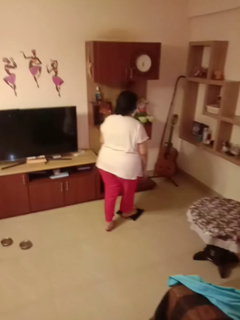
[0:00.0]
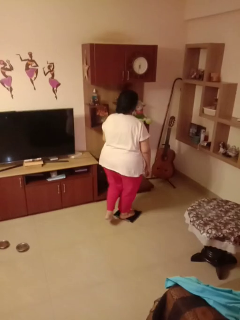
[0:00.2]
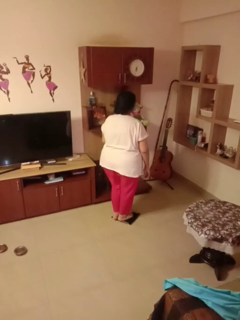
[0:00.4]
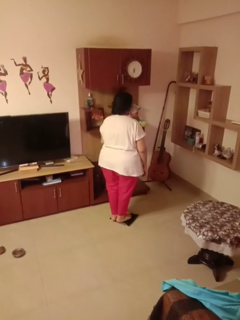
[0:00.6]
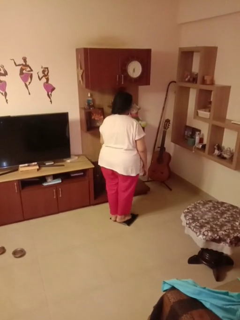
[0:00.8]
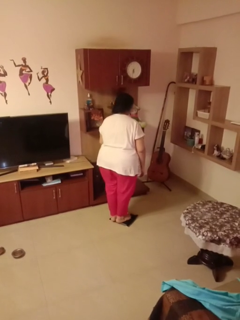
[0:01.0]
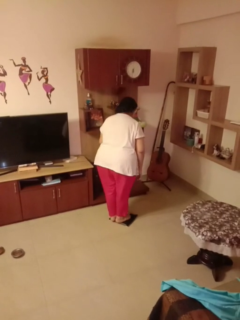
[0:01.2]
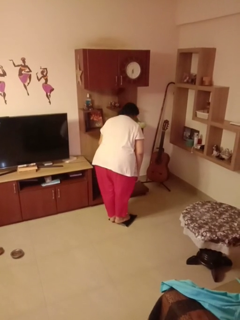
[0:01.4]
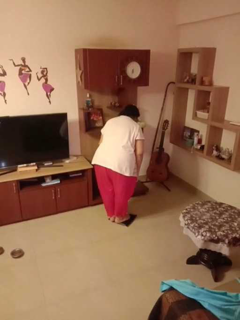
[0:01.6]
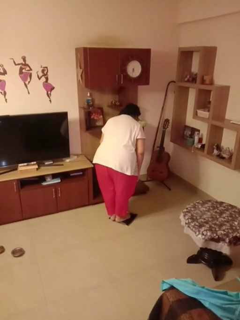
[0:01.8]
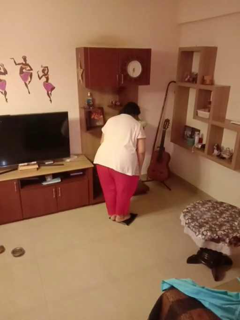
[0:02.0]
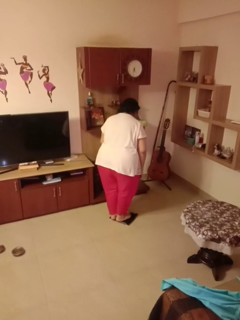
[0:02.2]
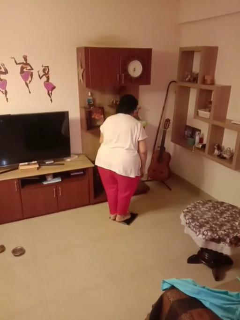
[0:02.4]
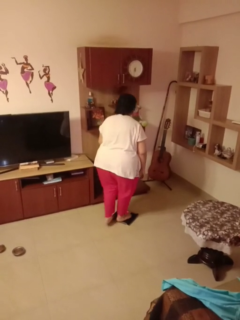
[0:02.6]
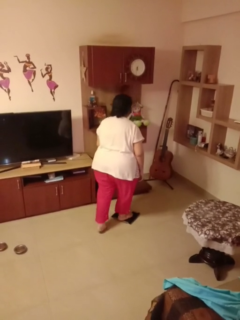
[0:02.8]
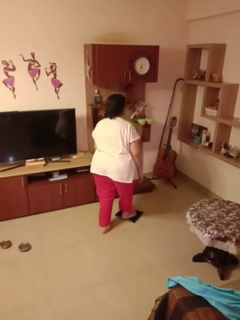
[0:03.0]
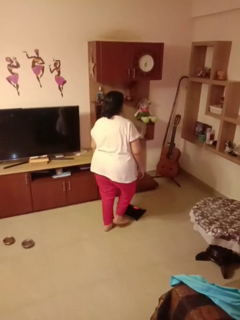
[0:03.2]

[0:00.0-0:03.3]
person uses bodyweight scale

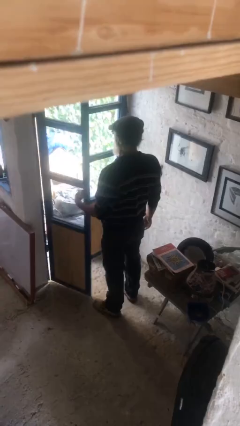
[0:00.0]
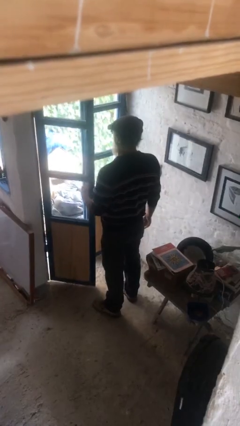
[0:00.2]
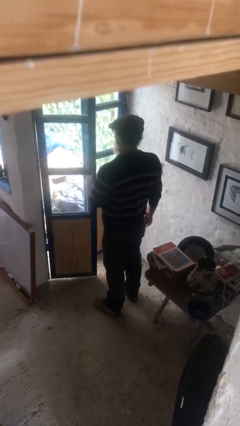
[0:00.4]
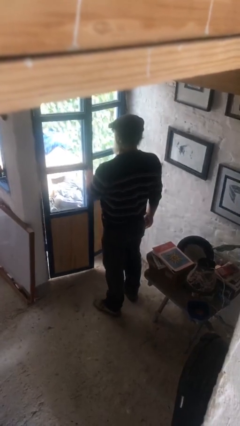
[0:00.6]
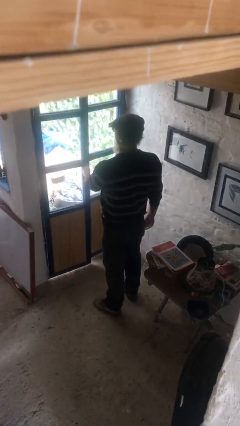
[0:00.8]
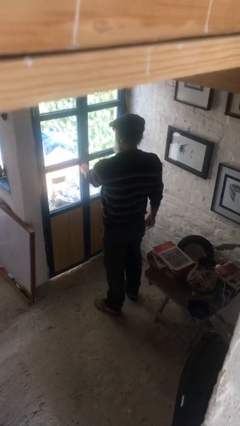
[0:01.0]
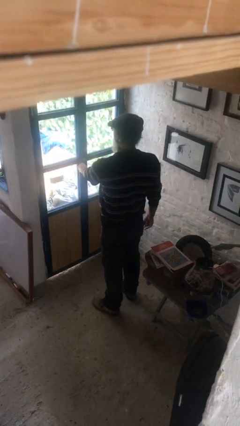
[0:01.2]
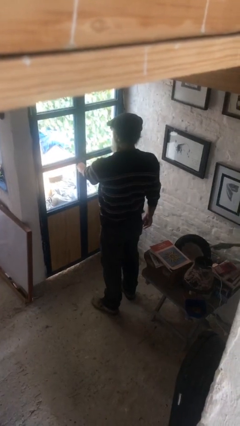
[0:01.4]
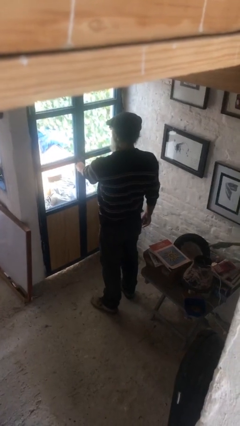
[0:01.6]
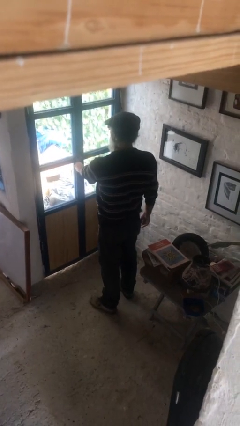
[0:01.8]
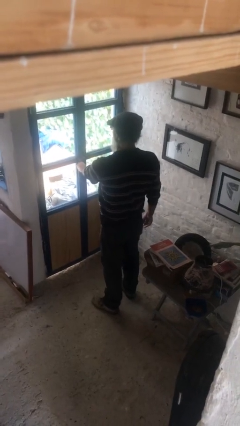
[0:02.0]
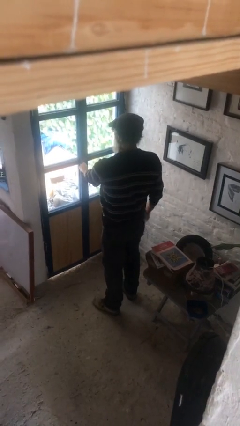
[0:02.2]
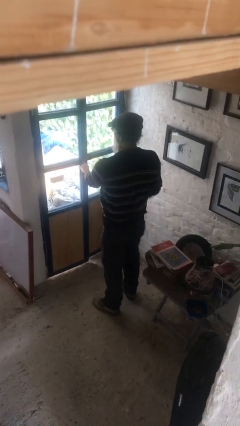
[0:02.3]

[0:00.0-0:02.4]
person closes facility door

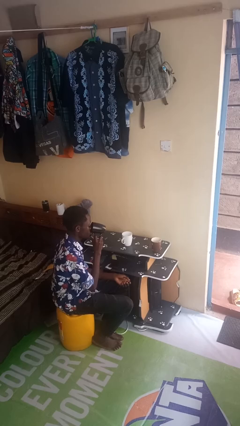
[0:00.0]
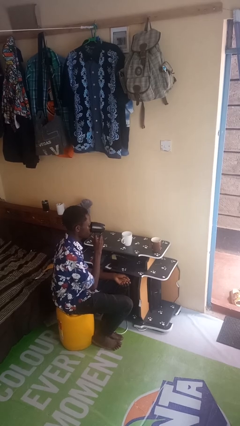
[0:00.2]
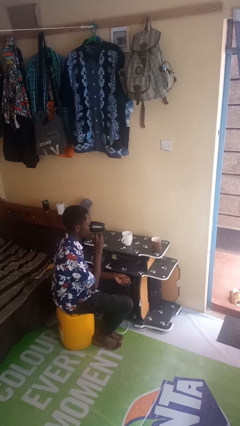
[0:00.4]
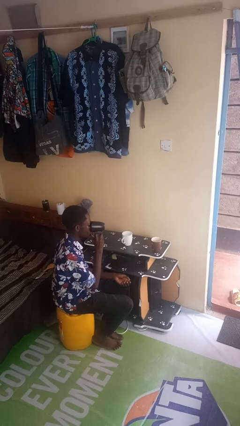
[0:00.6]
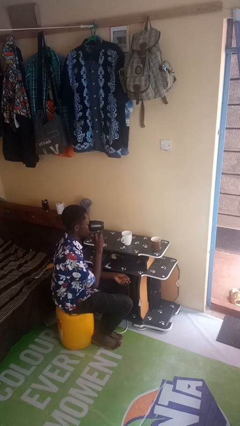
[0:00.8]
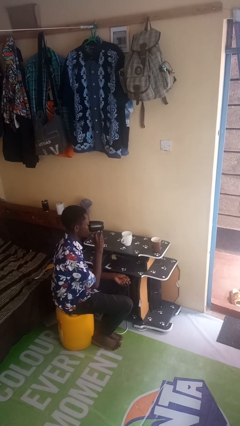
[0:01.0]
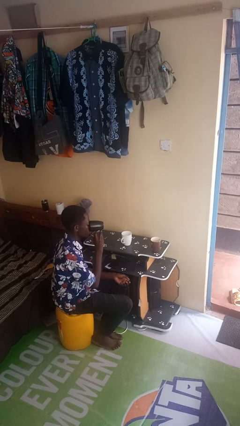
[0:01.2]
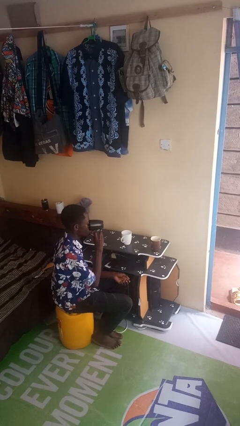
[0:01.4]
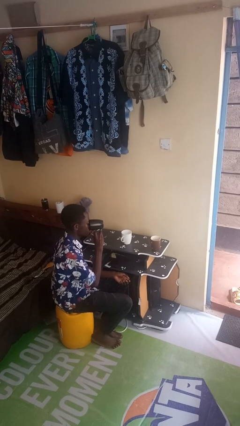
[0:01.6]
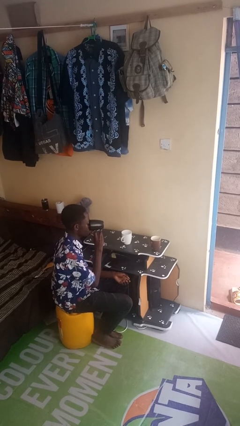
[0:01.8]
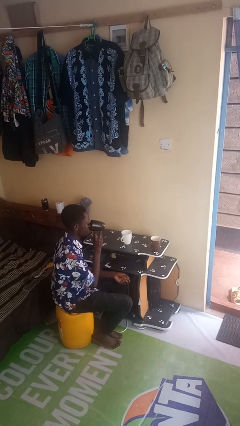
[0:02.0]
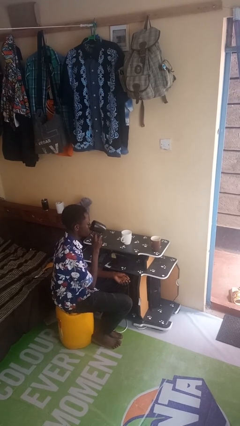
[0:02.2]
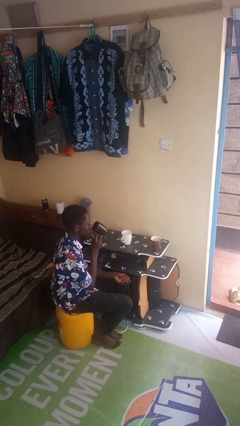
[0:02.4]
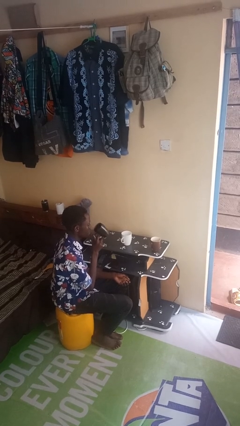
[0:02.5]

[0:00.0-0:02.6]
person drinks from shotglass

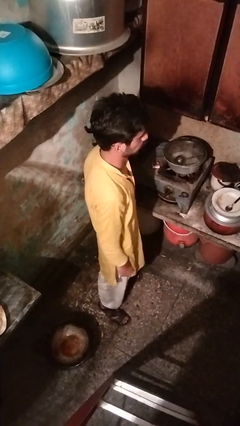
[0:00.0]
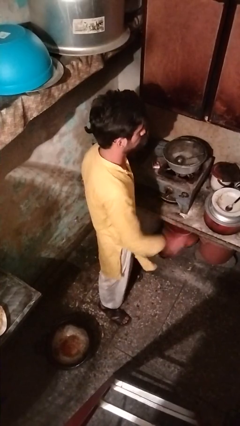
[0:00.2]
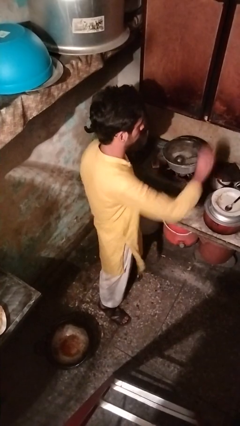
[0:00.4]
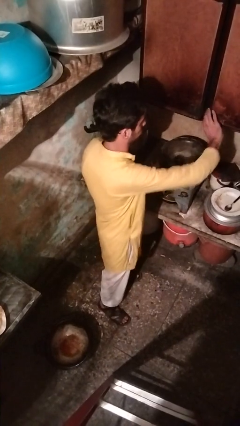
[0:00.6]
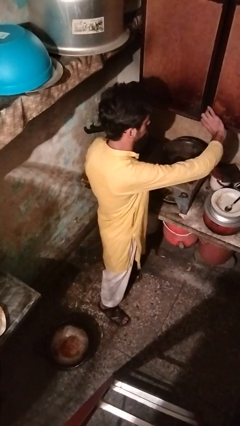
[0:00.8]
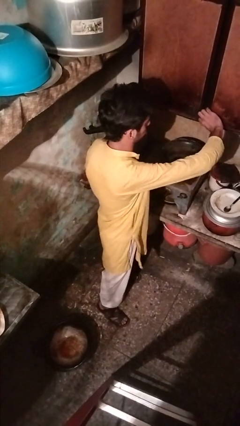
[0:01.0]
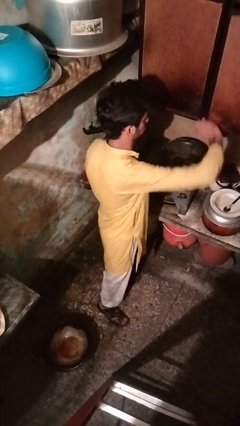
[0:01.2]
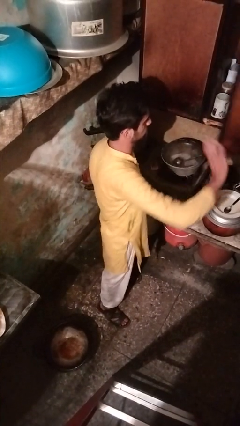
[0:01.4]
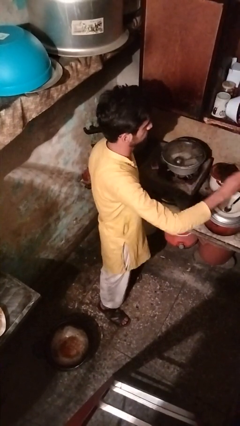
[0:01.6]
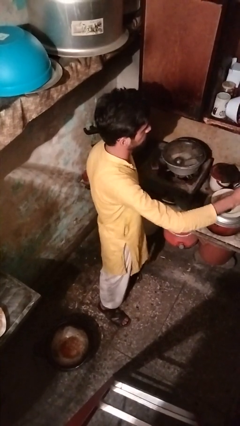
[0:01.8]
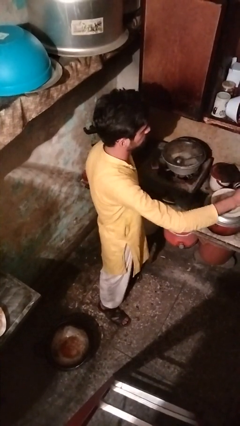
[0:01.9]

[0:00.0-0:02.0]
person opens cabinet

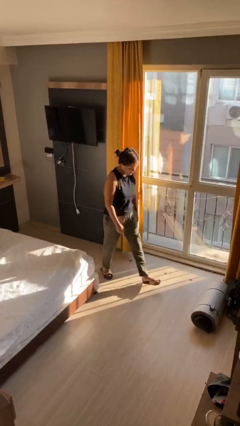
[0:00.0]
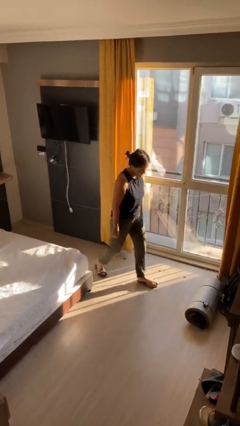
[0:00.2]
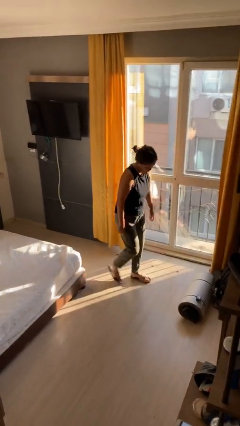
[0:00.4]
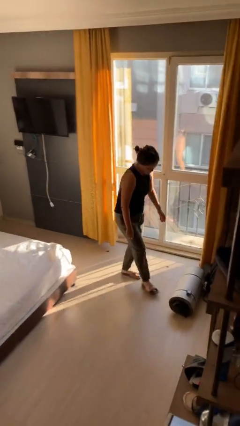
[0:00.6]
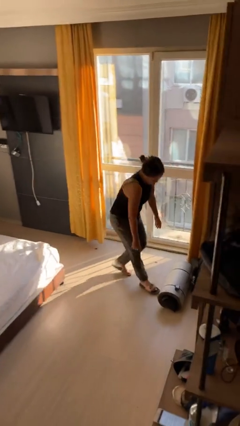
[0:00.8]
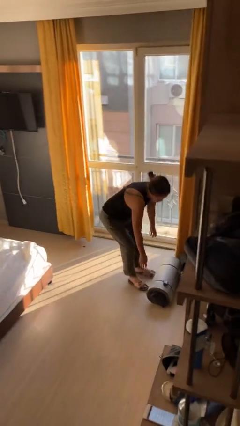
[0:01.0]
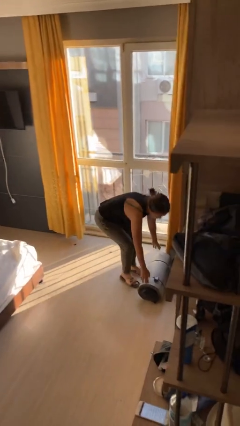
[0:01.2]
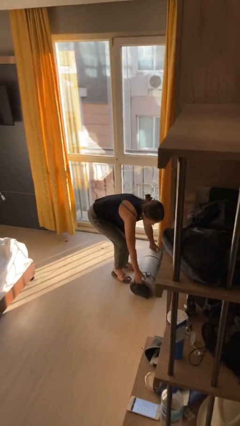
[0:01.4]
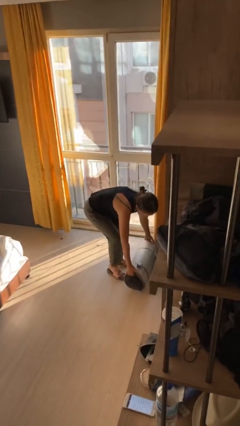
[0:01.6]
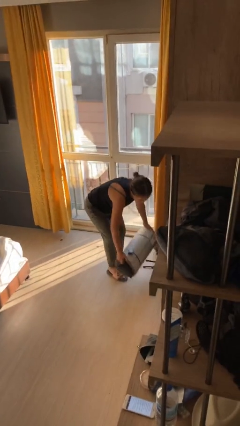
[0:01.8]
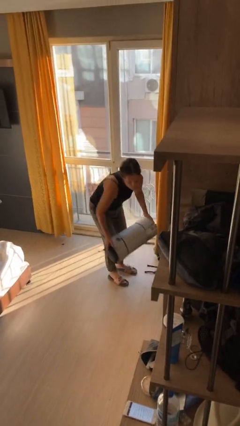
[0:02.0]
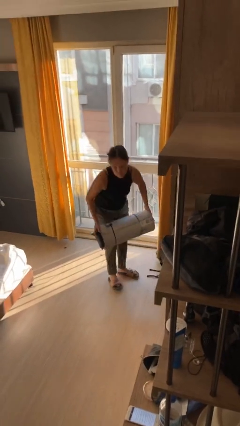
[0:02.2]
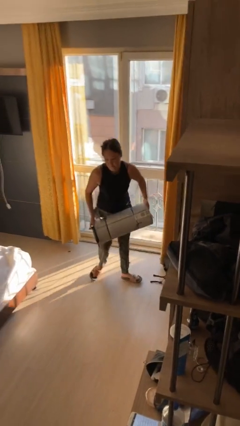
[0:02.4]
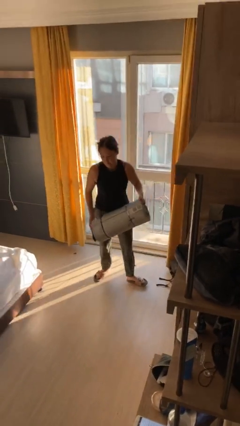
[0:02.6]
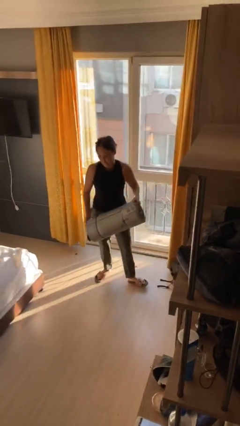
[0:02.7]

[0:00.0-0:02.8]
person picks up object from floor

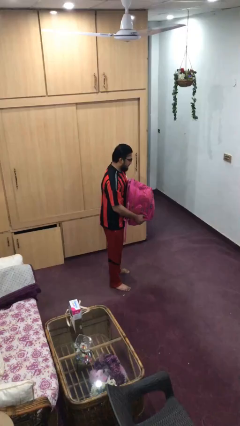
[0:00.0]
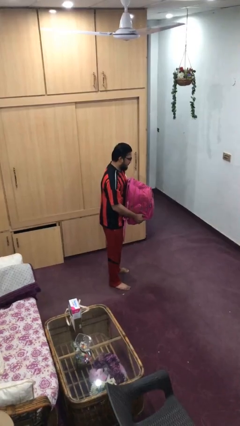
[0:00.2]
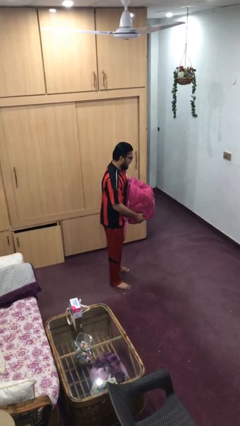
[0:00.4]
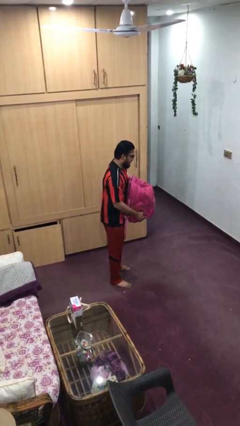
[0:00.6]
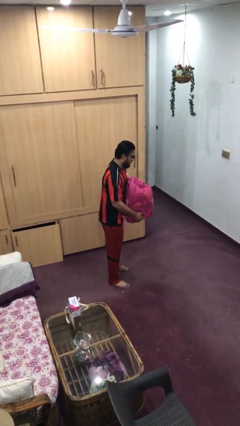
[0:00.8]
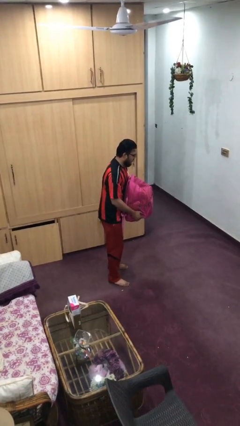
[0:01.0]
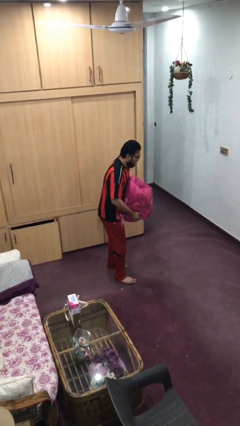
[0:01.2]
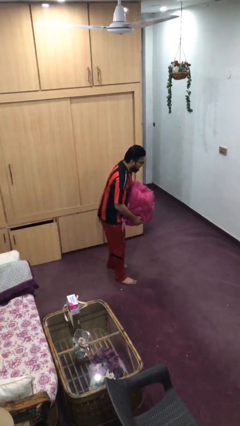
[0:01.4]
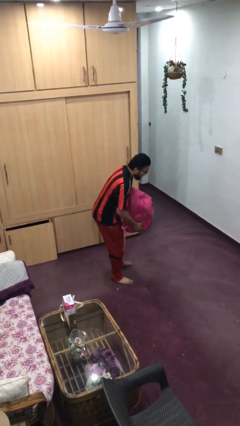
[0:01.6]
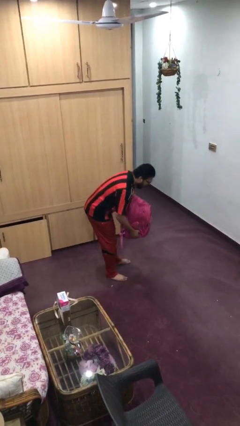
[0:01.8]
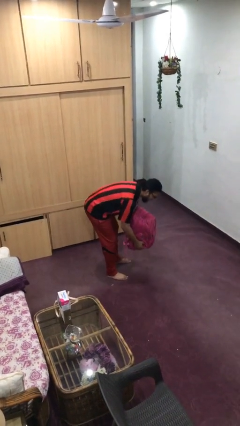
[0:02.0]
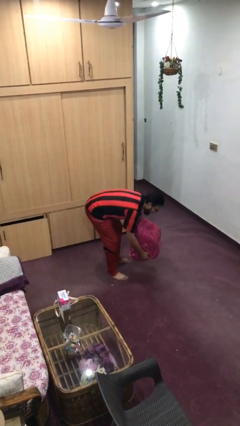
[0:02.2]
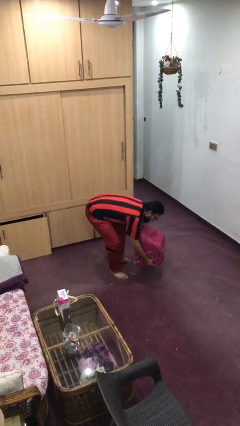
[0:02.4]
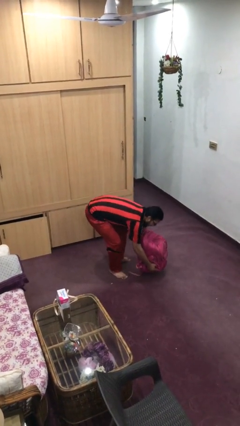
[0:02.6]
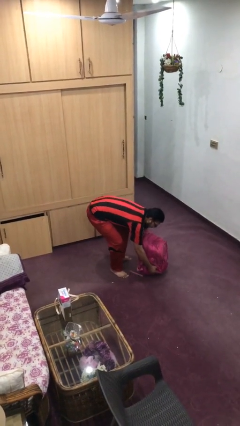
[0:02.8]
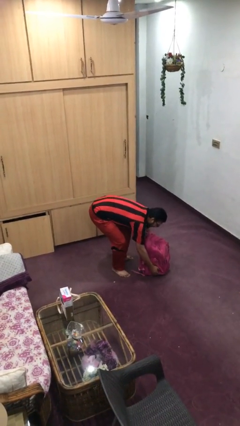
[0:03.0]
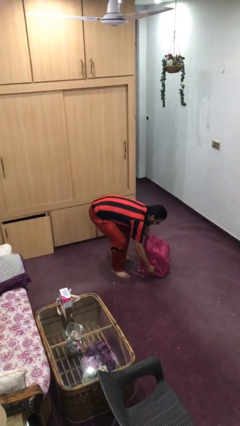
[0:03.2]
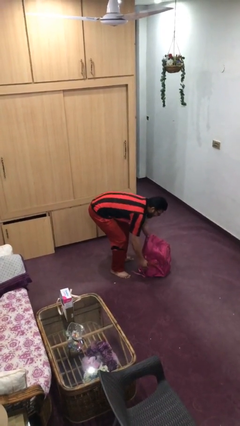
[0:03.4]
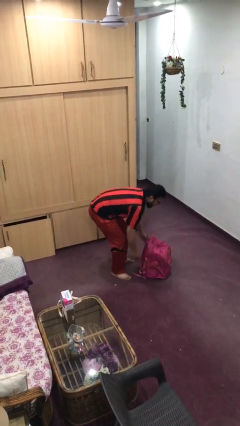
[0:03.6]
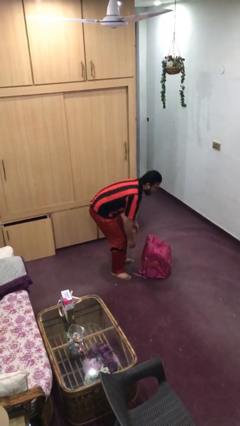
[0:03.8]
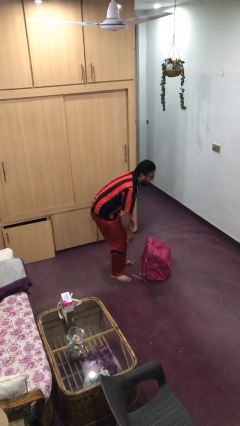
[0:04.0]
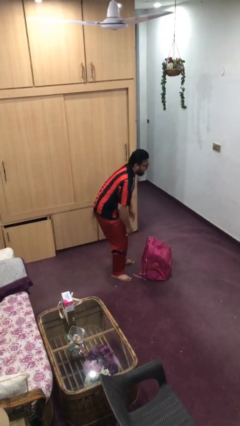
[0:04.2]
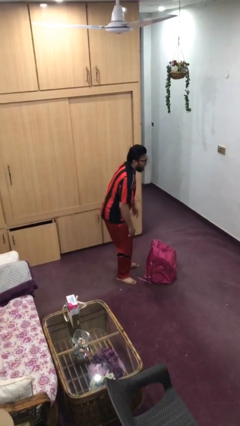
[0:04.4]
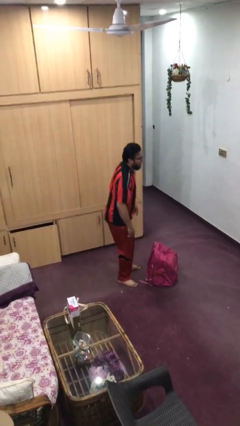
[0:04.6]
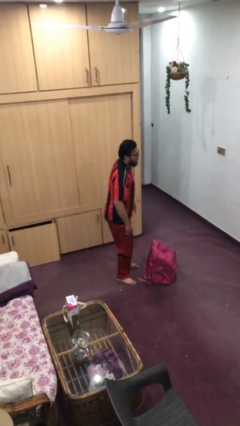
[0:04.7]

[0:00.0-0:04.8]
person puts down object on floor

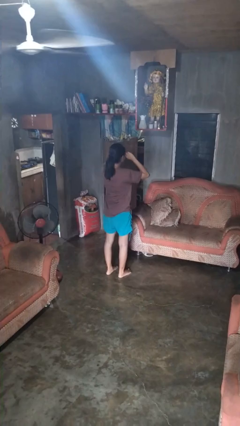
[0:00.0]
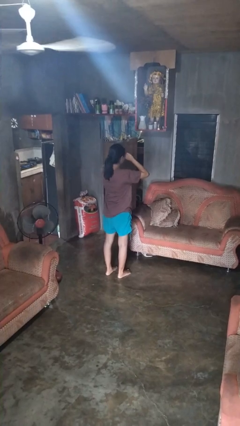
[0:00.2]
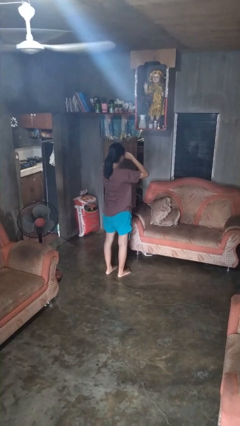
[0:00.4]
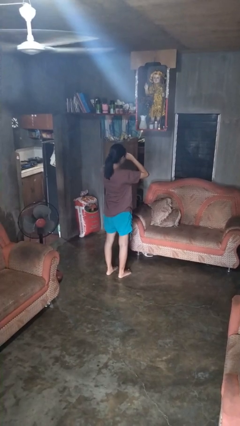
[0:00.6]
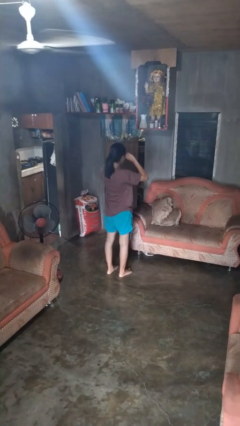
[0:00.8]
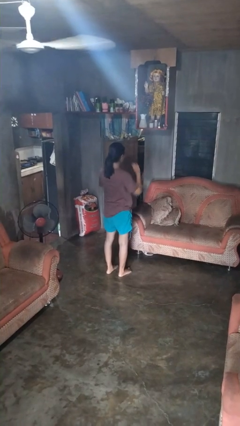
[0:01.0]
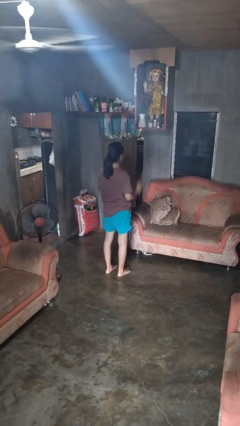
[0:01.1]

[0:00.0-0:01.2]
person rubs eyes
